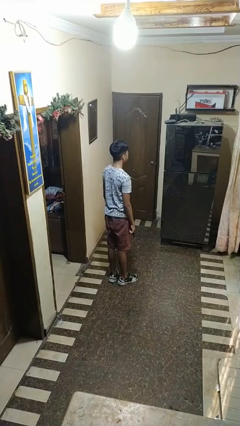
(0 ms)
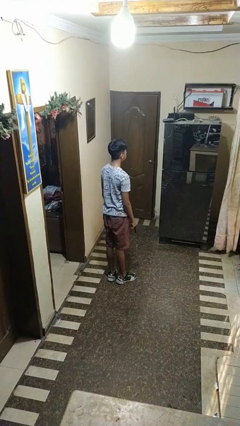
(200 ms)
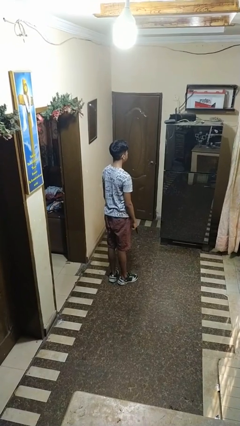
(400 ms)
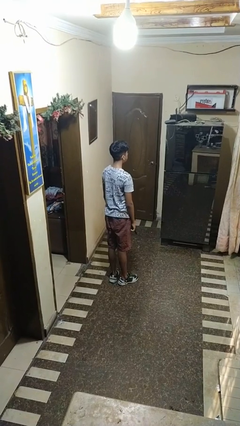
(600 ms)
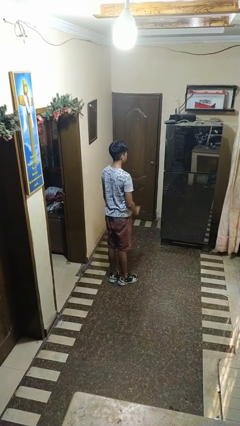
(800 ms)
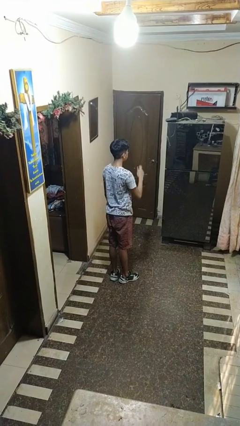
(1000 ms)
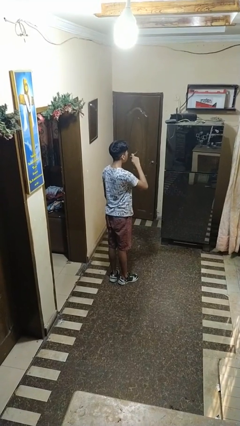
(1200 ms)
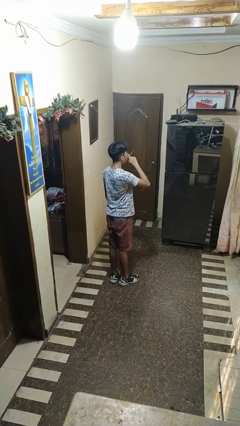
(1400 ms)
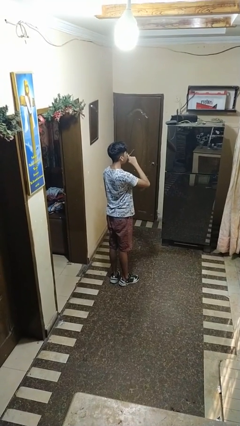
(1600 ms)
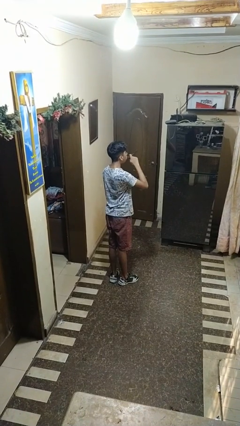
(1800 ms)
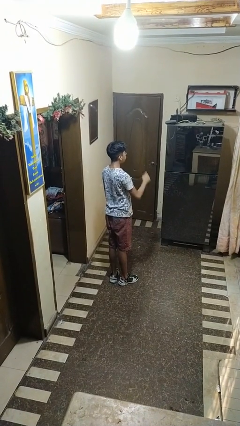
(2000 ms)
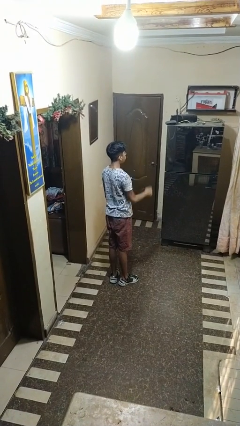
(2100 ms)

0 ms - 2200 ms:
person vapes

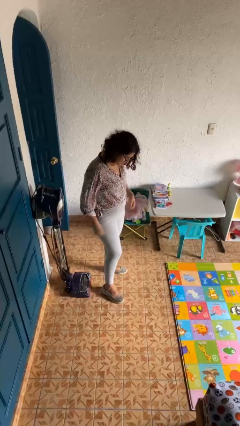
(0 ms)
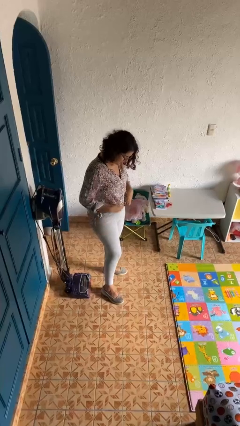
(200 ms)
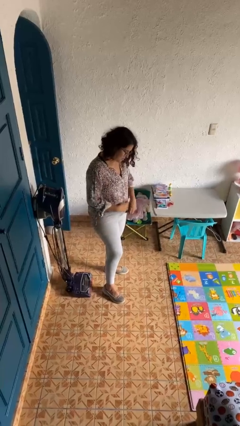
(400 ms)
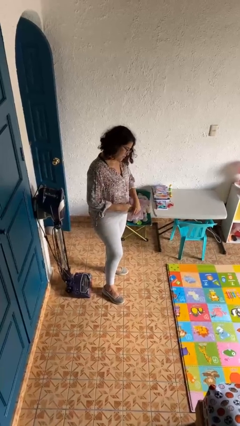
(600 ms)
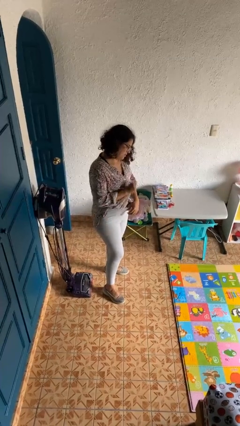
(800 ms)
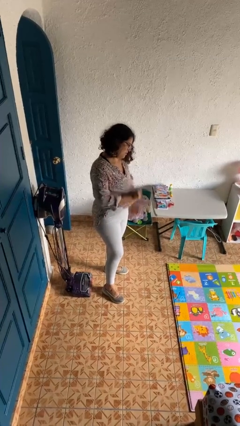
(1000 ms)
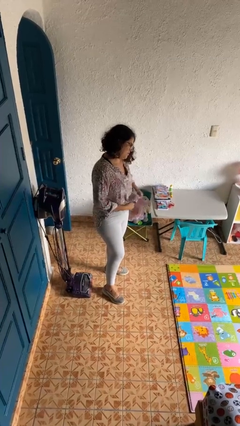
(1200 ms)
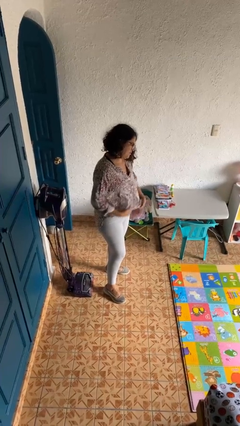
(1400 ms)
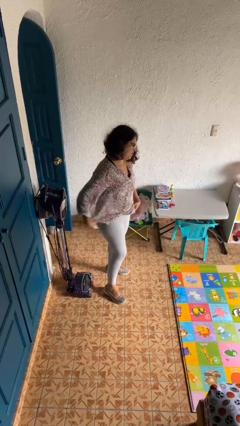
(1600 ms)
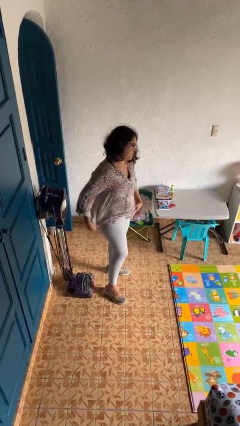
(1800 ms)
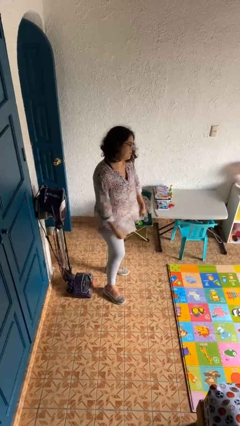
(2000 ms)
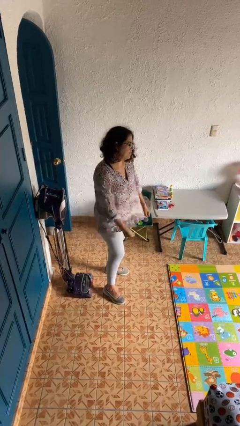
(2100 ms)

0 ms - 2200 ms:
person untucks shirt

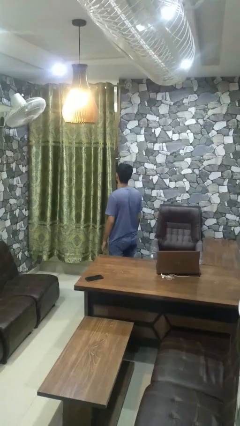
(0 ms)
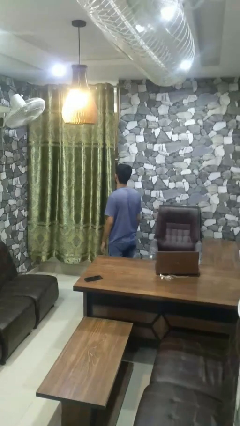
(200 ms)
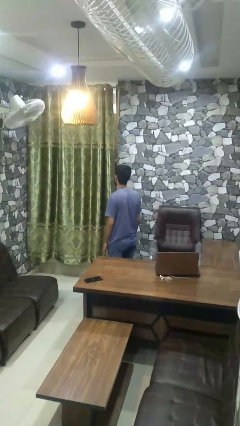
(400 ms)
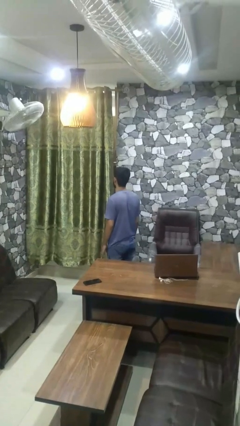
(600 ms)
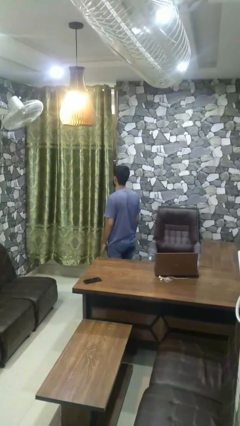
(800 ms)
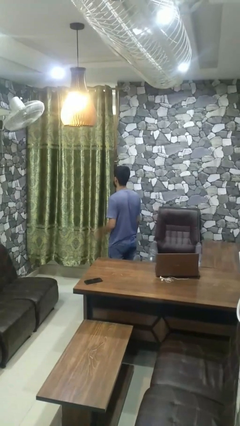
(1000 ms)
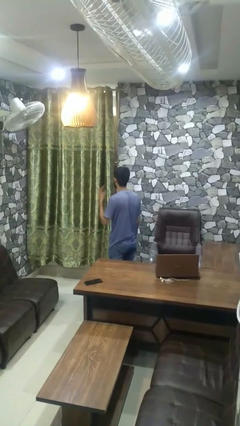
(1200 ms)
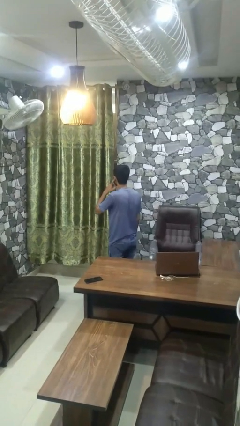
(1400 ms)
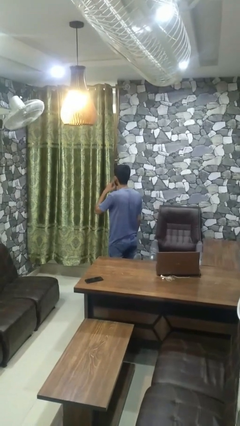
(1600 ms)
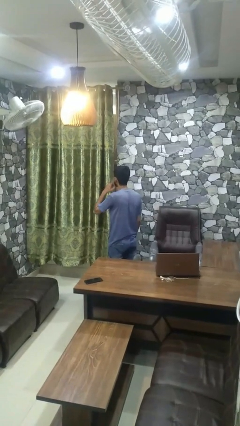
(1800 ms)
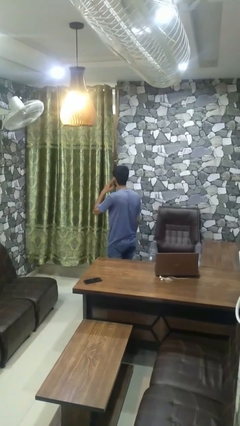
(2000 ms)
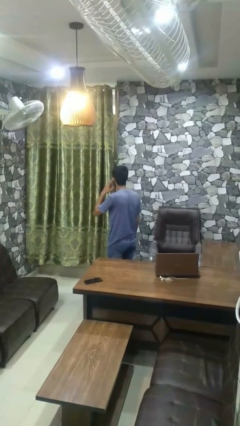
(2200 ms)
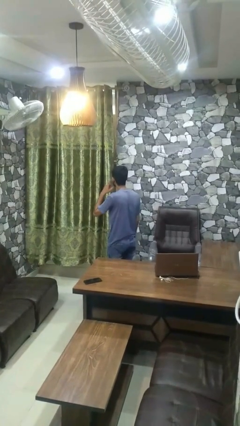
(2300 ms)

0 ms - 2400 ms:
person gestures listen closely

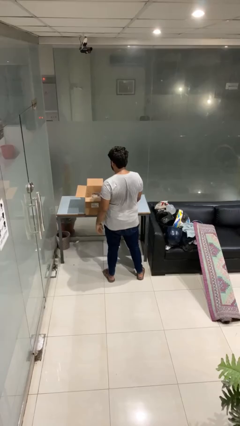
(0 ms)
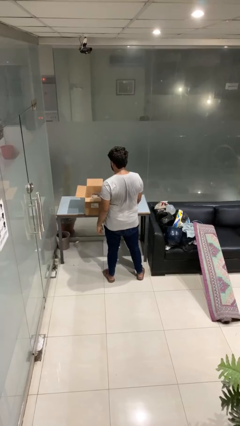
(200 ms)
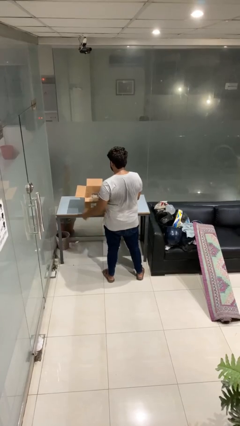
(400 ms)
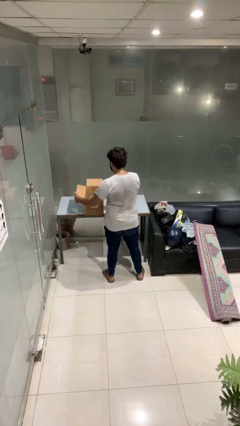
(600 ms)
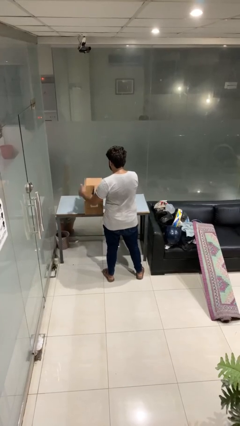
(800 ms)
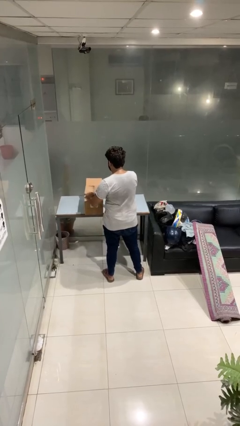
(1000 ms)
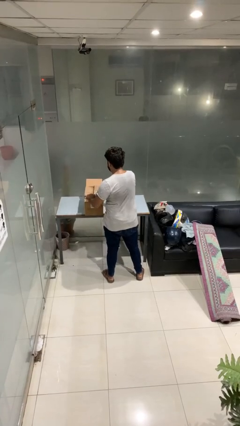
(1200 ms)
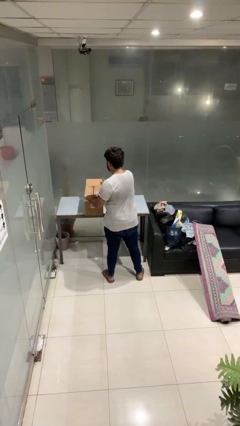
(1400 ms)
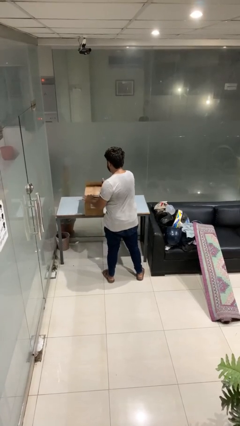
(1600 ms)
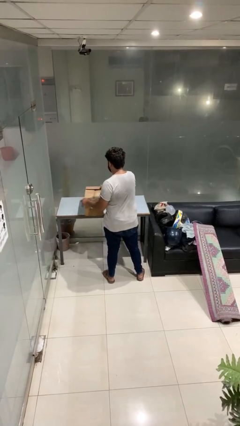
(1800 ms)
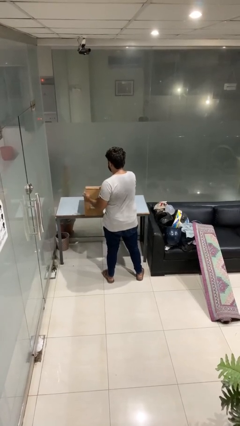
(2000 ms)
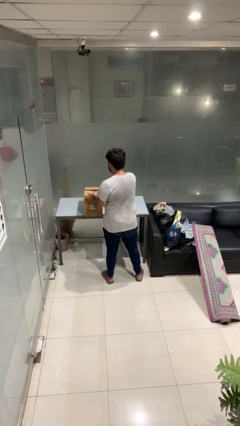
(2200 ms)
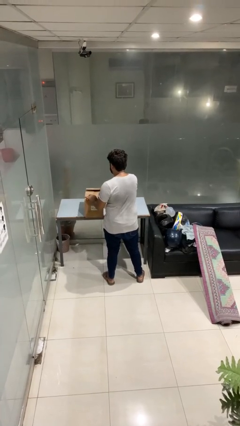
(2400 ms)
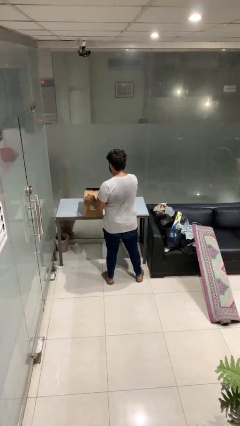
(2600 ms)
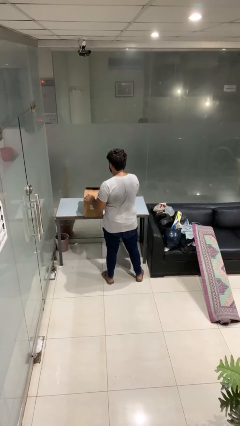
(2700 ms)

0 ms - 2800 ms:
person closes box

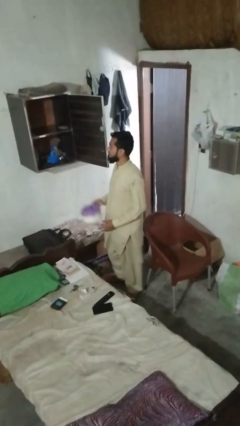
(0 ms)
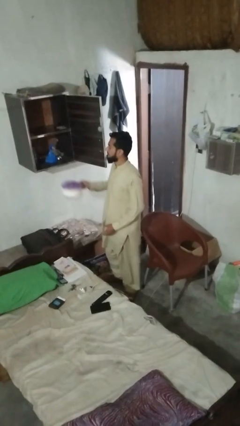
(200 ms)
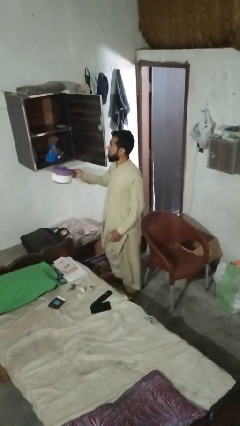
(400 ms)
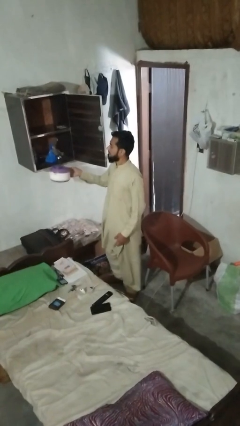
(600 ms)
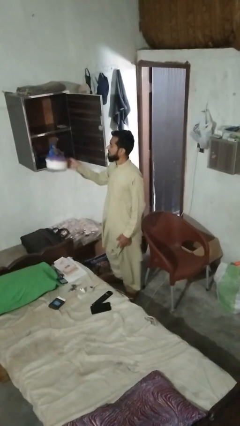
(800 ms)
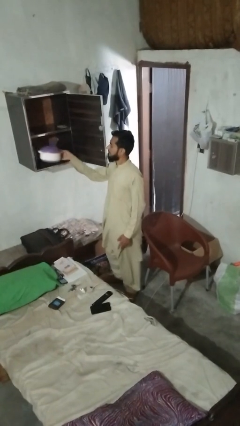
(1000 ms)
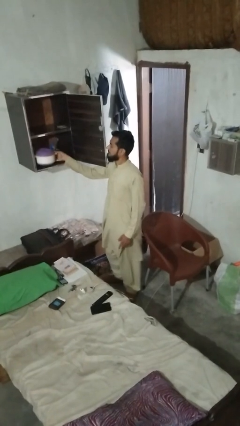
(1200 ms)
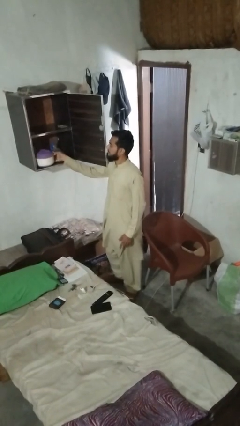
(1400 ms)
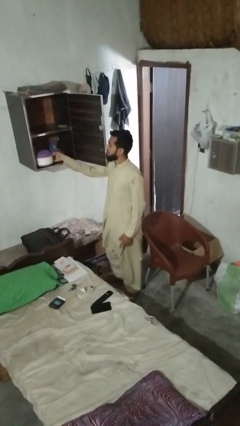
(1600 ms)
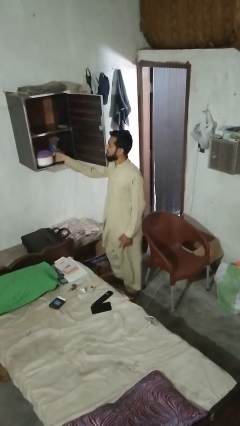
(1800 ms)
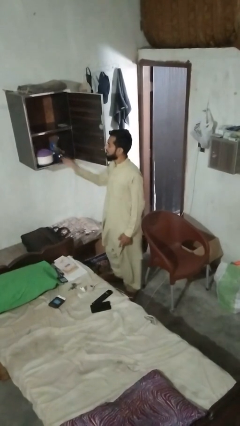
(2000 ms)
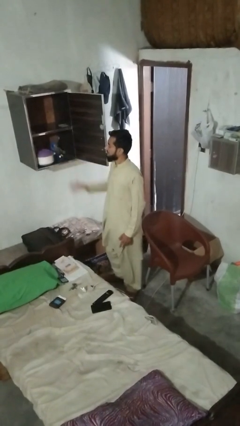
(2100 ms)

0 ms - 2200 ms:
person loads groceries into cabinet

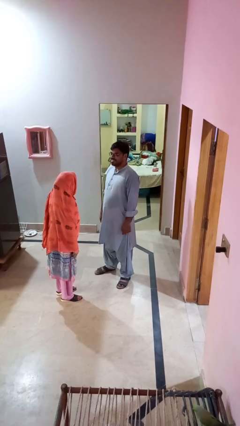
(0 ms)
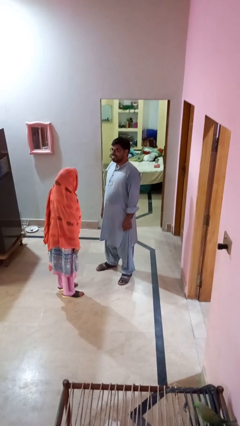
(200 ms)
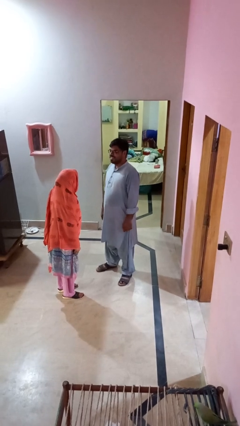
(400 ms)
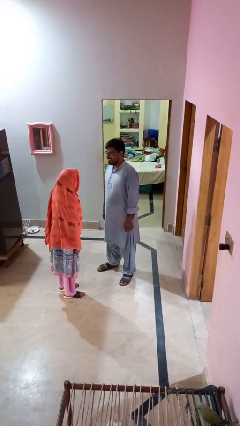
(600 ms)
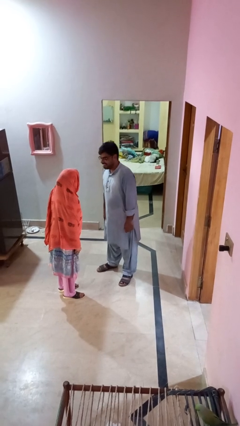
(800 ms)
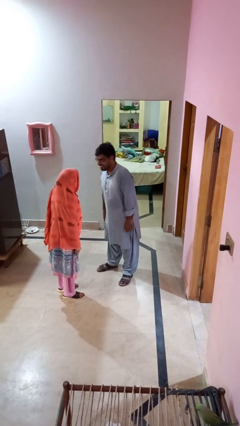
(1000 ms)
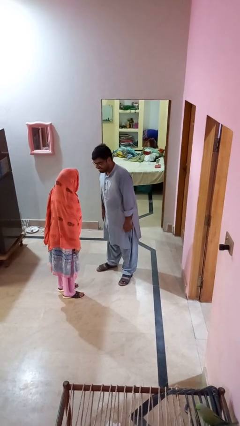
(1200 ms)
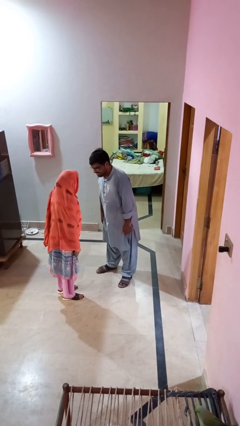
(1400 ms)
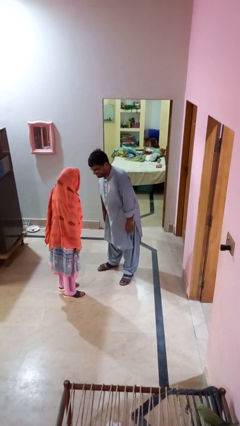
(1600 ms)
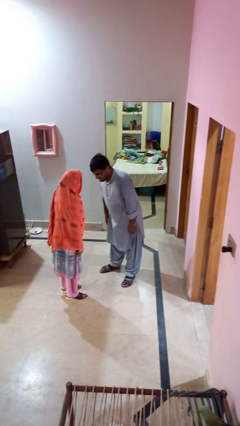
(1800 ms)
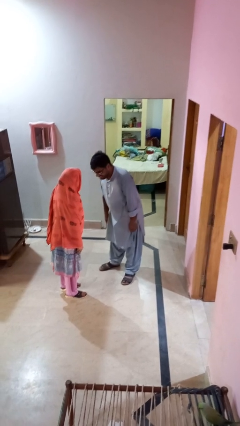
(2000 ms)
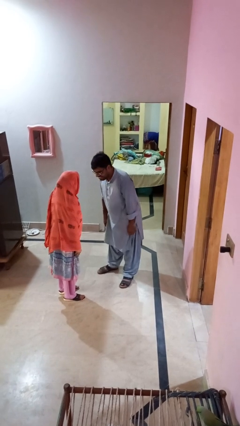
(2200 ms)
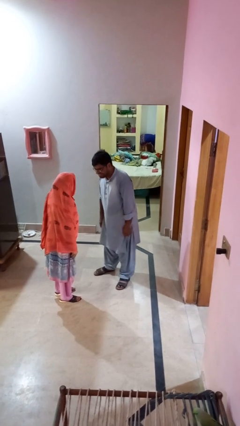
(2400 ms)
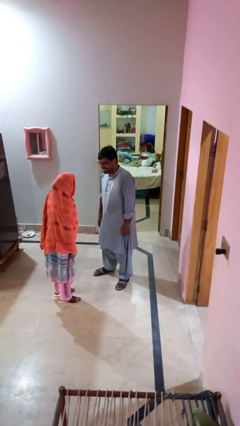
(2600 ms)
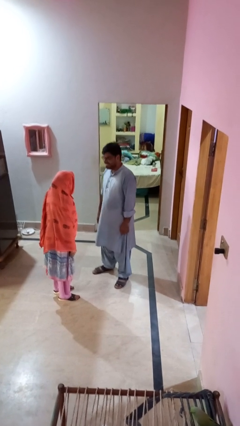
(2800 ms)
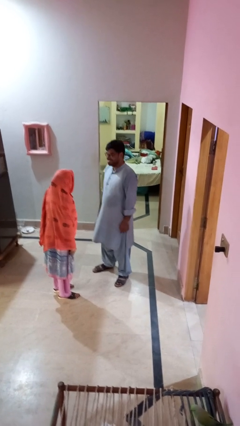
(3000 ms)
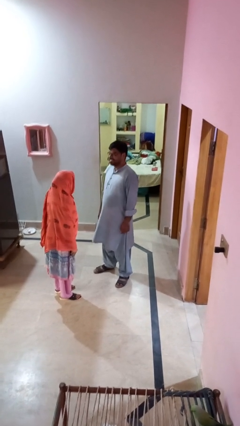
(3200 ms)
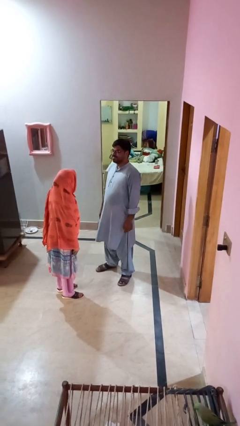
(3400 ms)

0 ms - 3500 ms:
person laughs with person

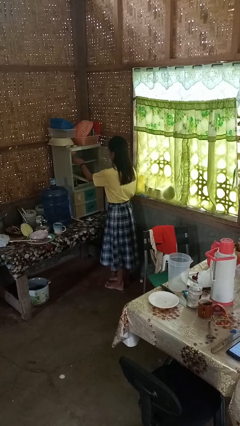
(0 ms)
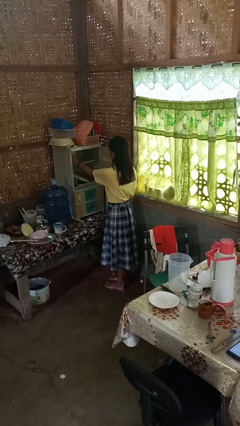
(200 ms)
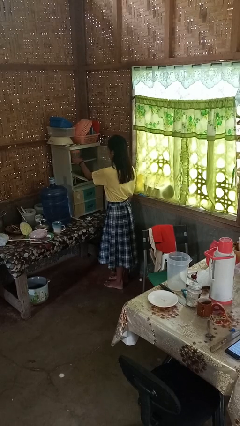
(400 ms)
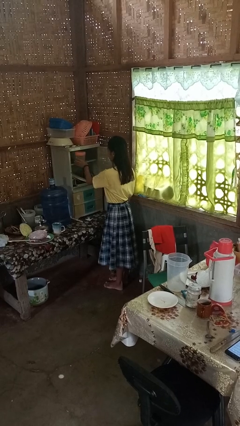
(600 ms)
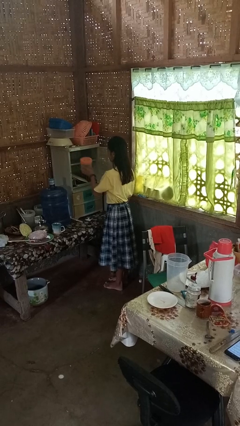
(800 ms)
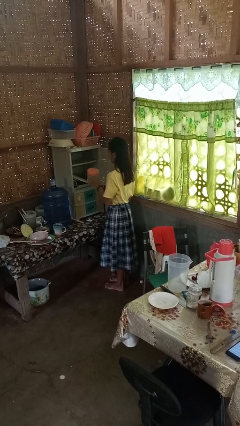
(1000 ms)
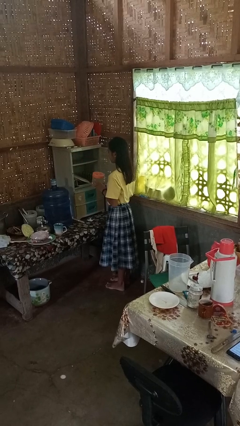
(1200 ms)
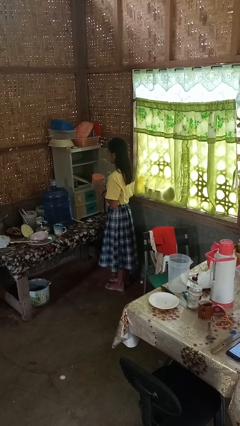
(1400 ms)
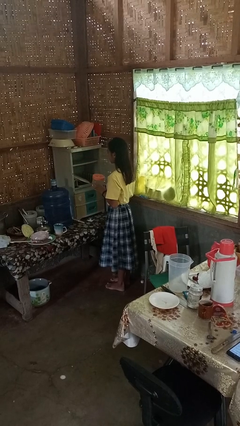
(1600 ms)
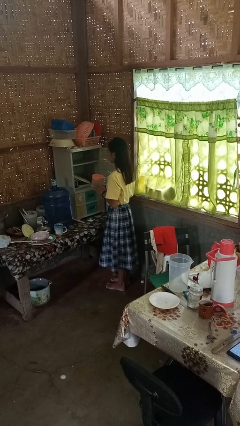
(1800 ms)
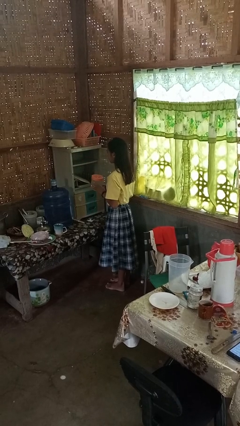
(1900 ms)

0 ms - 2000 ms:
person picks up object from cabinet
